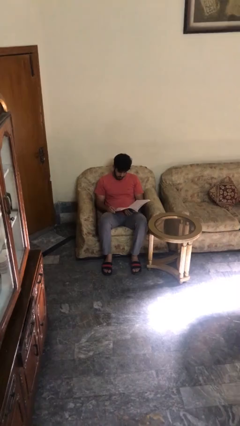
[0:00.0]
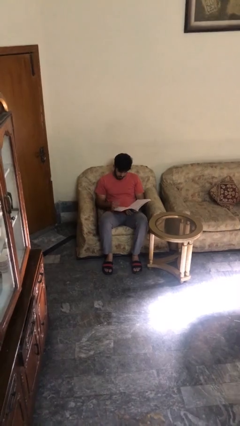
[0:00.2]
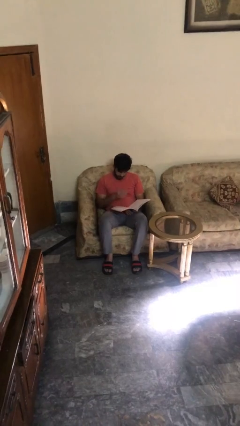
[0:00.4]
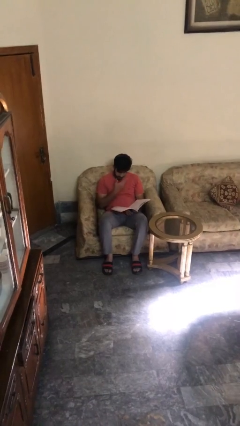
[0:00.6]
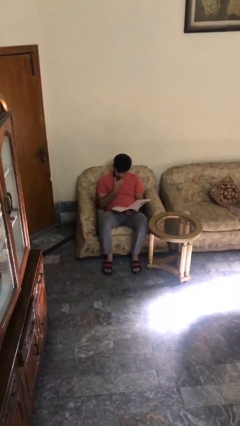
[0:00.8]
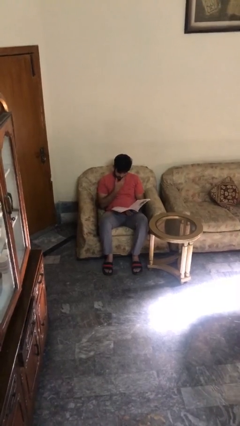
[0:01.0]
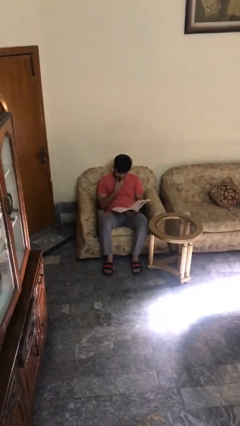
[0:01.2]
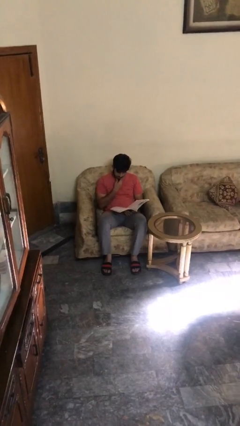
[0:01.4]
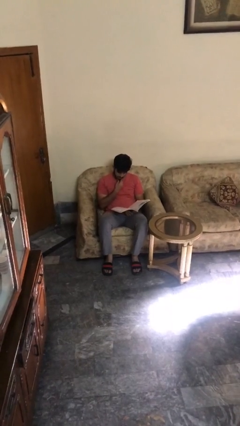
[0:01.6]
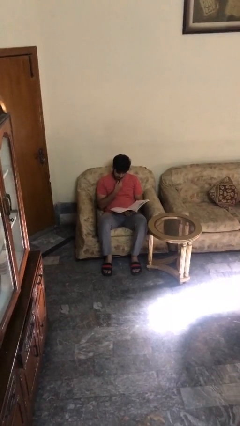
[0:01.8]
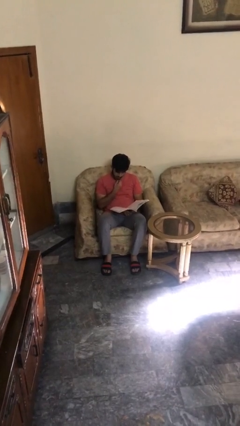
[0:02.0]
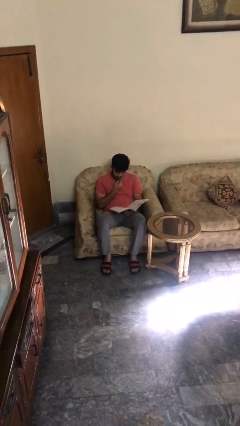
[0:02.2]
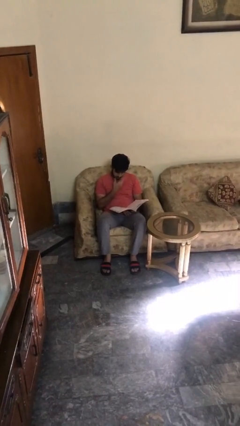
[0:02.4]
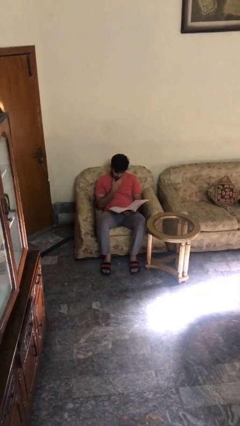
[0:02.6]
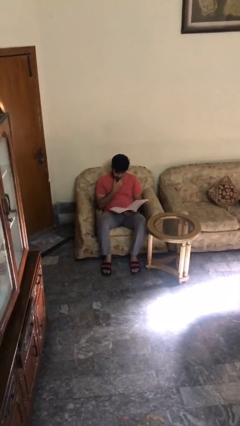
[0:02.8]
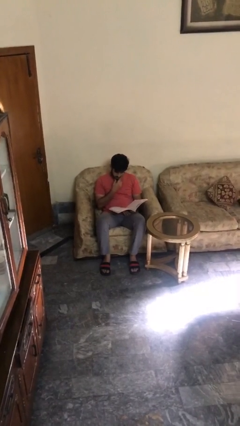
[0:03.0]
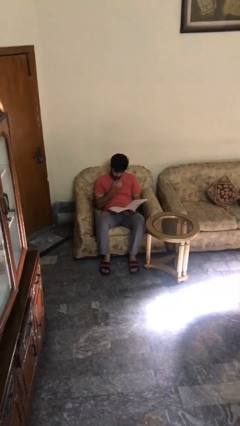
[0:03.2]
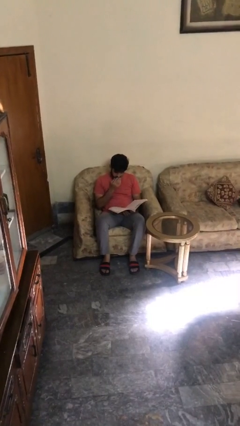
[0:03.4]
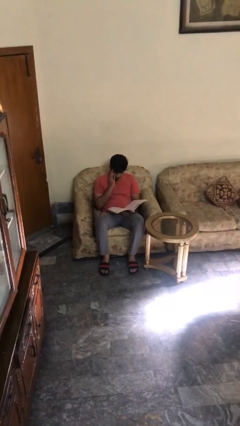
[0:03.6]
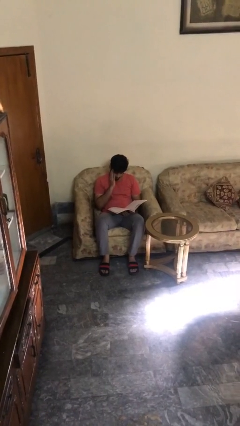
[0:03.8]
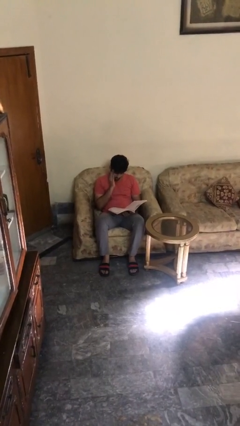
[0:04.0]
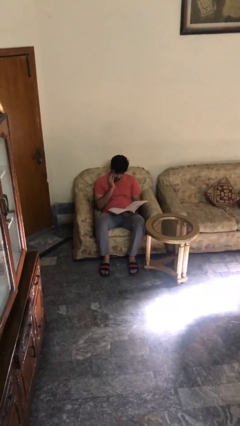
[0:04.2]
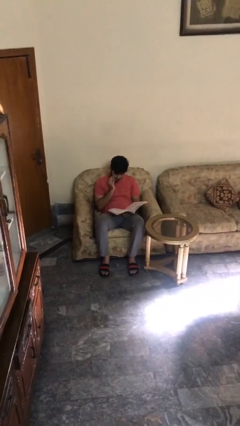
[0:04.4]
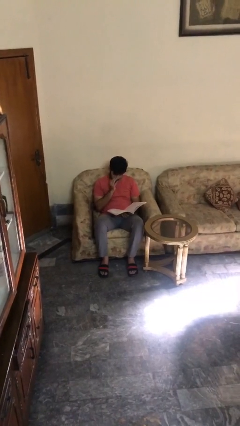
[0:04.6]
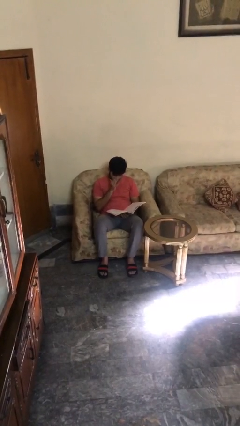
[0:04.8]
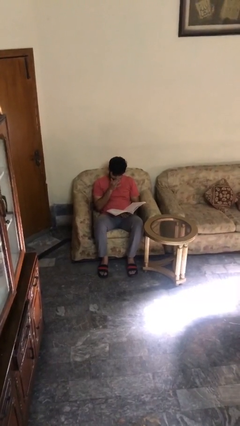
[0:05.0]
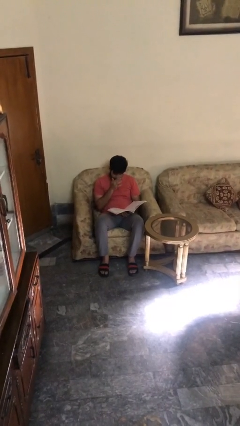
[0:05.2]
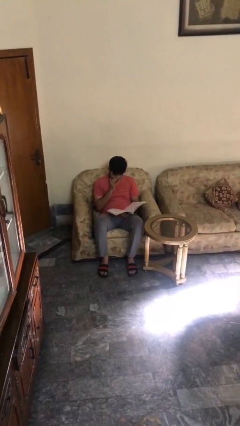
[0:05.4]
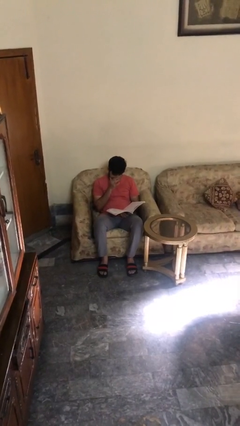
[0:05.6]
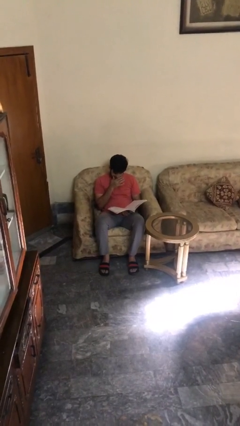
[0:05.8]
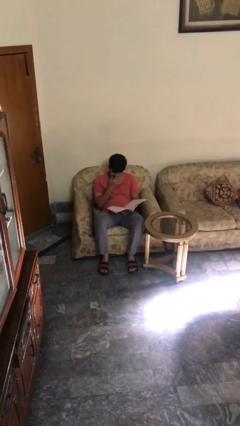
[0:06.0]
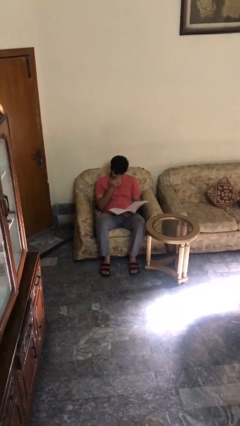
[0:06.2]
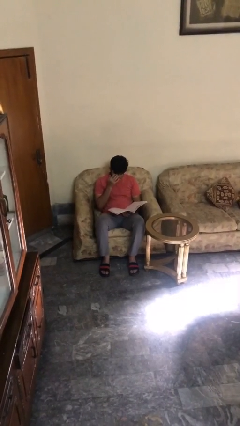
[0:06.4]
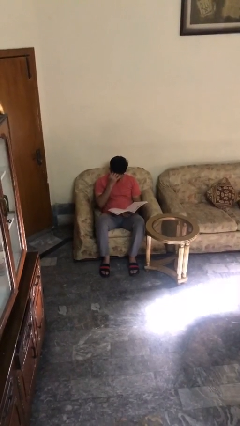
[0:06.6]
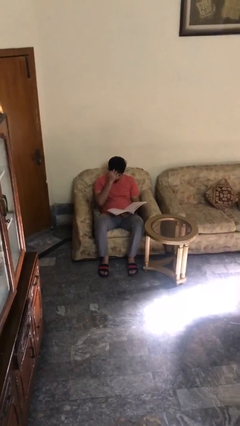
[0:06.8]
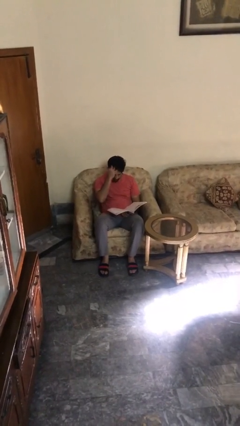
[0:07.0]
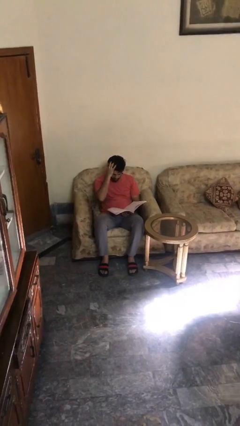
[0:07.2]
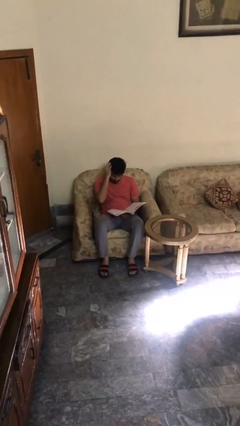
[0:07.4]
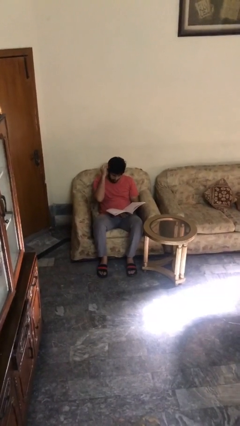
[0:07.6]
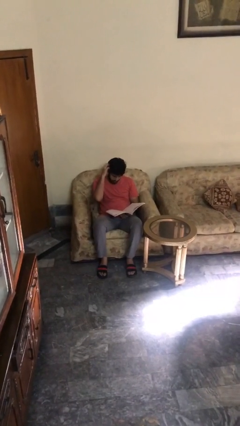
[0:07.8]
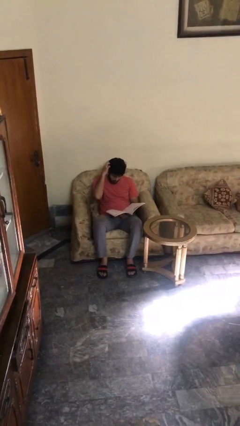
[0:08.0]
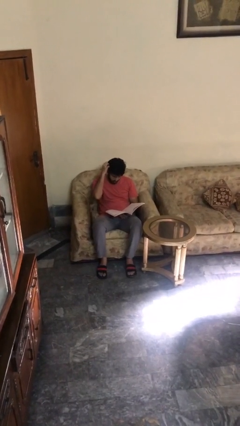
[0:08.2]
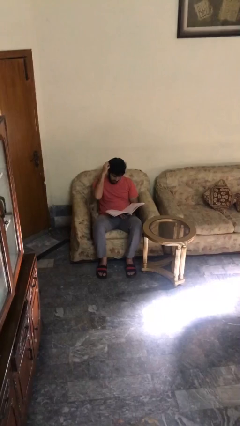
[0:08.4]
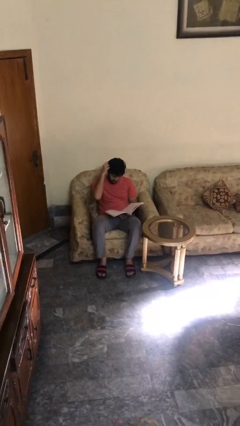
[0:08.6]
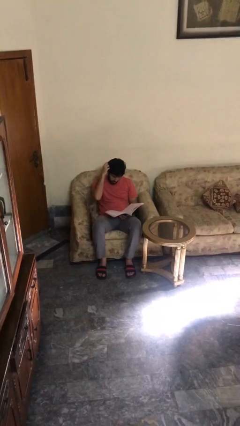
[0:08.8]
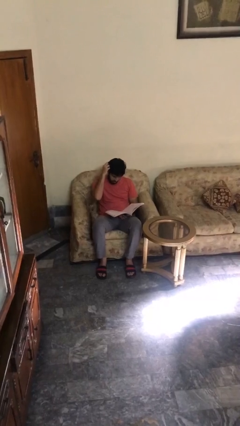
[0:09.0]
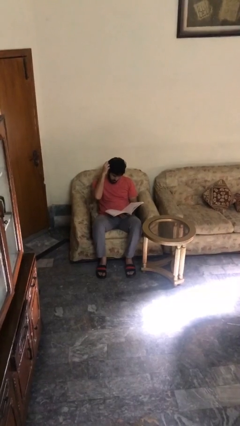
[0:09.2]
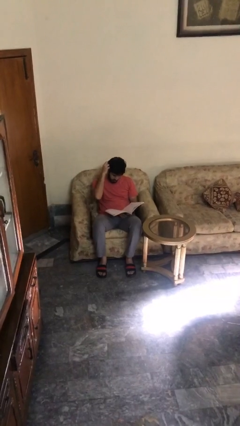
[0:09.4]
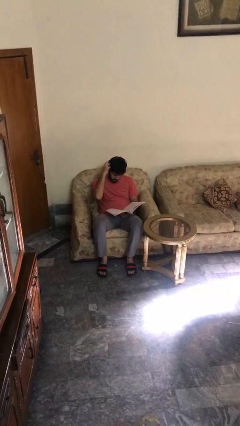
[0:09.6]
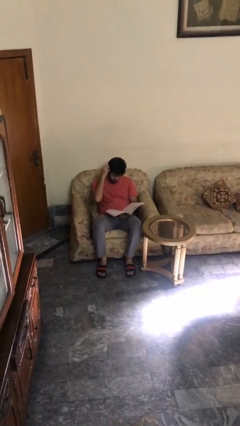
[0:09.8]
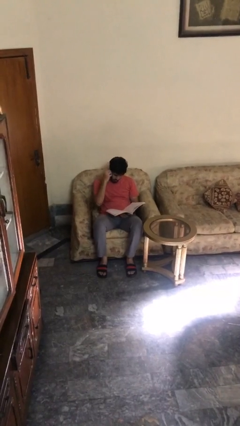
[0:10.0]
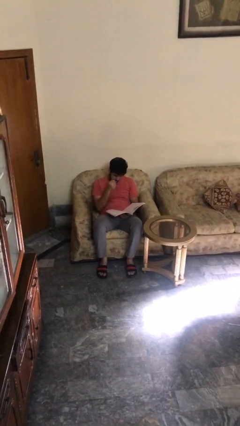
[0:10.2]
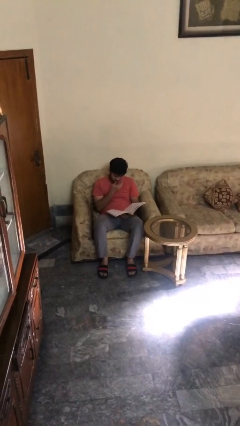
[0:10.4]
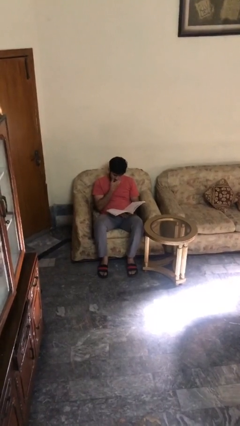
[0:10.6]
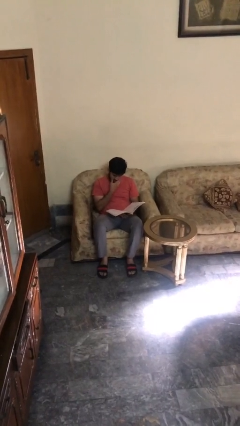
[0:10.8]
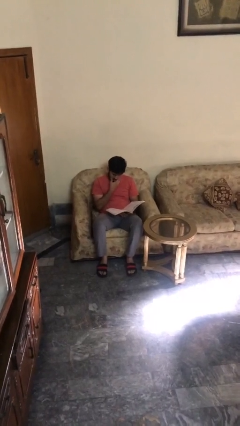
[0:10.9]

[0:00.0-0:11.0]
person reads document

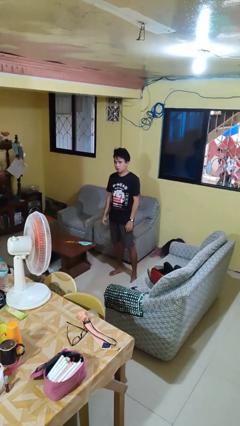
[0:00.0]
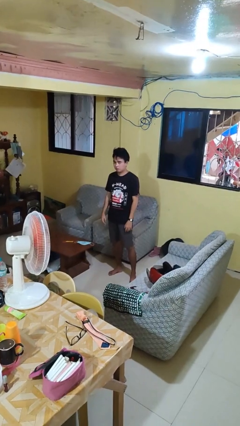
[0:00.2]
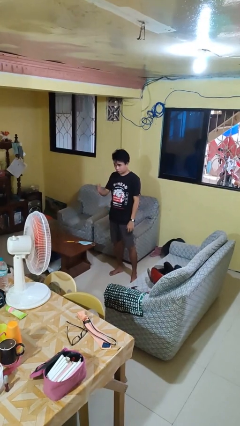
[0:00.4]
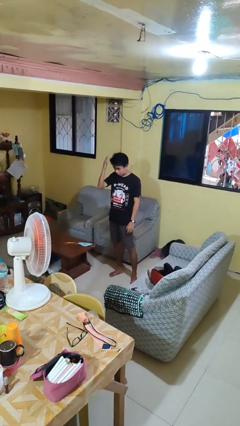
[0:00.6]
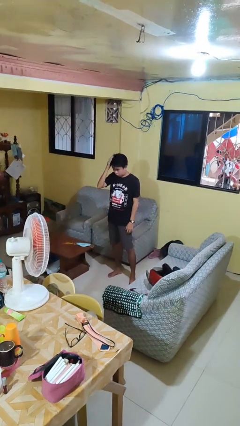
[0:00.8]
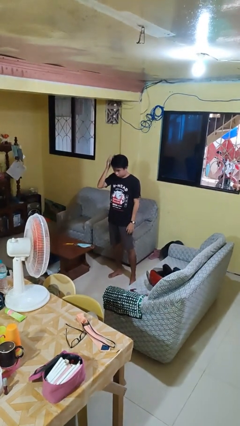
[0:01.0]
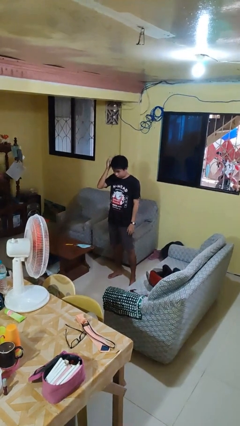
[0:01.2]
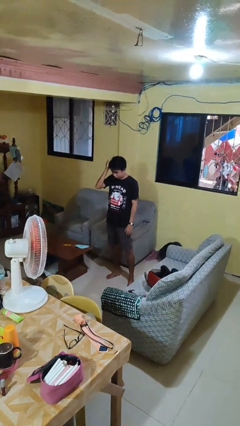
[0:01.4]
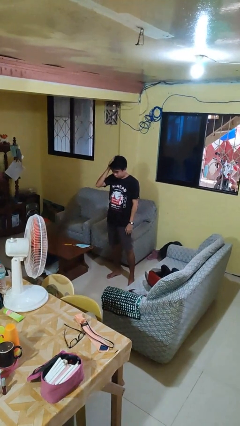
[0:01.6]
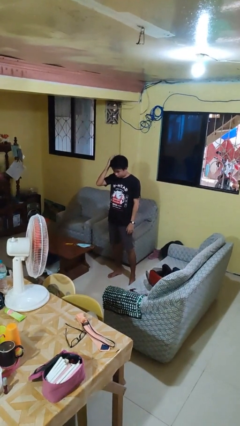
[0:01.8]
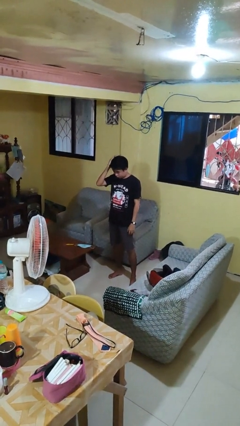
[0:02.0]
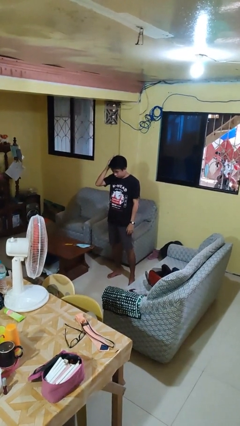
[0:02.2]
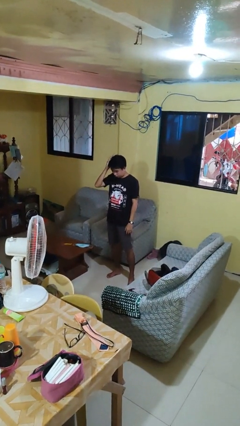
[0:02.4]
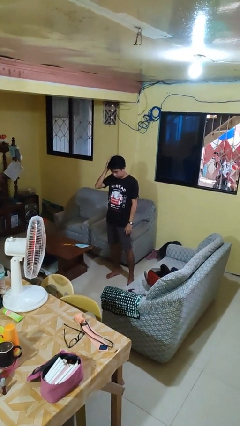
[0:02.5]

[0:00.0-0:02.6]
person pats head

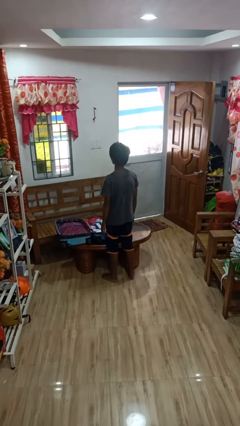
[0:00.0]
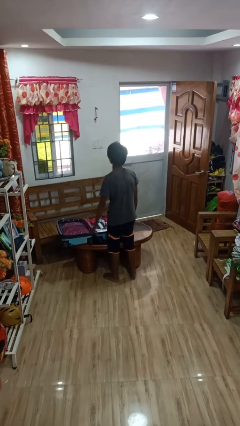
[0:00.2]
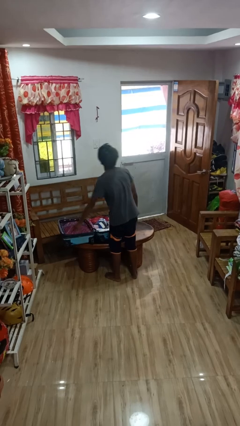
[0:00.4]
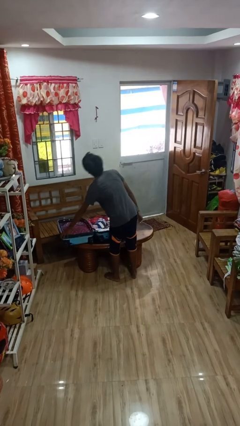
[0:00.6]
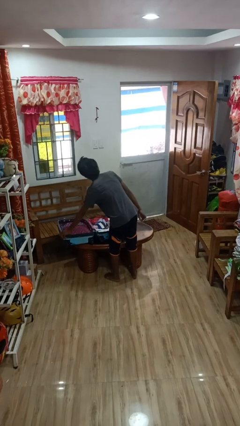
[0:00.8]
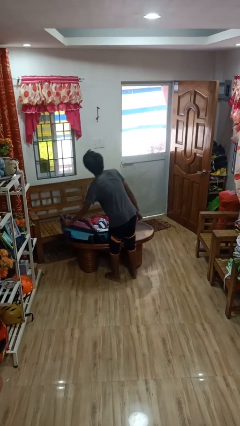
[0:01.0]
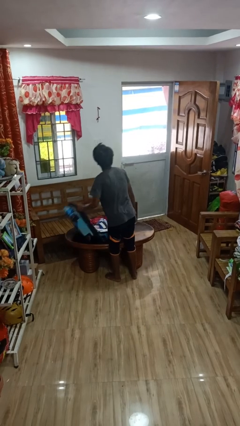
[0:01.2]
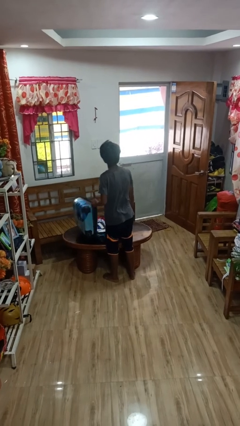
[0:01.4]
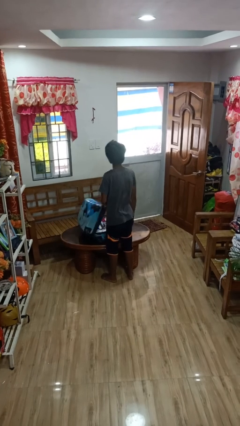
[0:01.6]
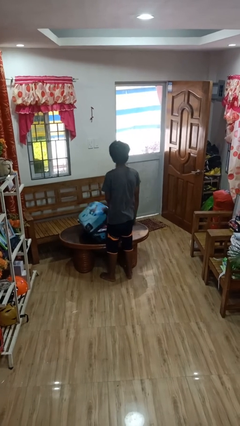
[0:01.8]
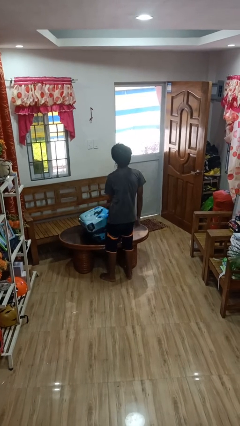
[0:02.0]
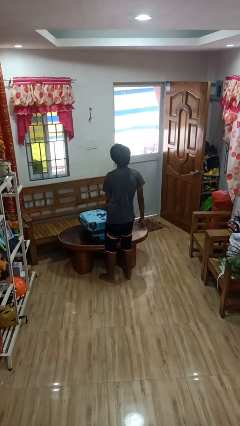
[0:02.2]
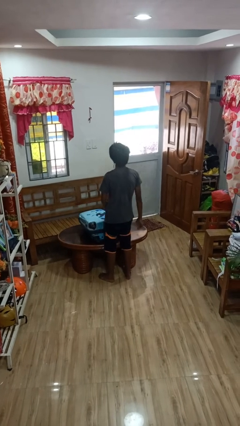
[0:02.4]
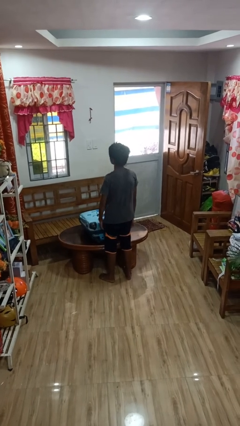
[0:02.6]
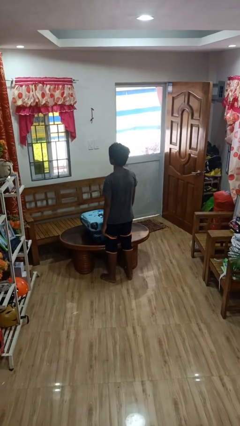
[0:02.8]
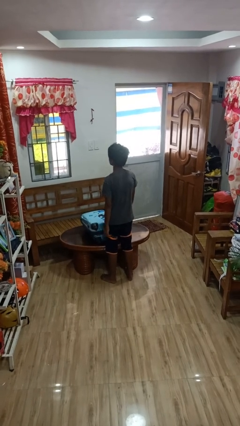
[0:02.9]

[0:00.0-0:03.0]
person closes suitcase

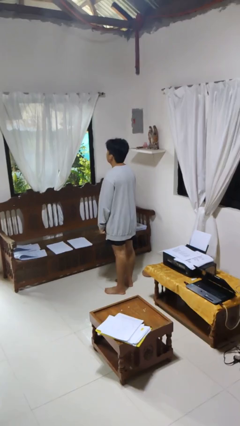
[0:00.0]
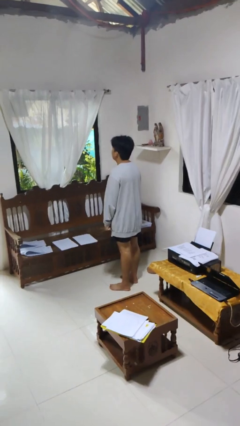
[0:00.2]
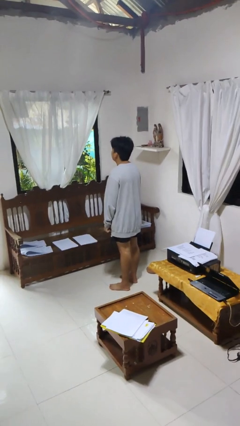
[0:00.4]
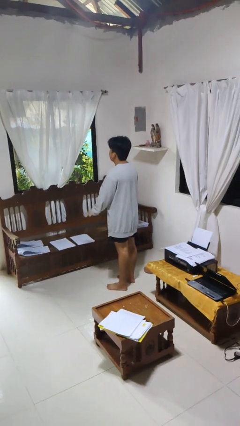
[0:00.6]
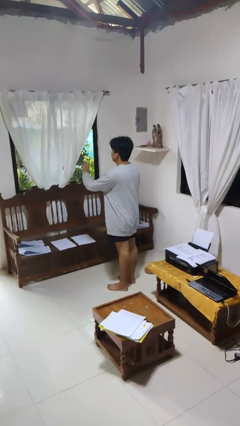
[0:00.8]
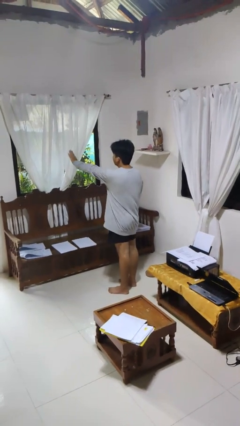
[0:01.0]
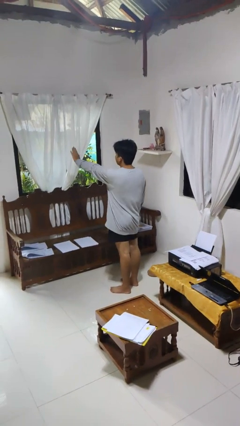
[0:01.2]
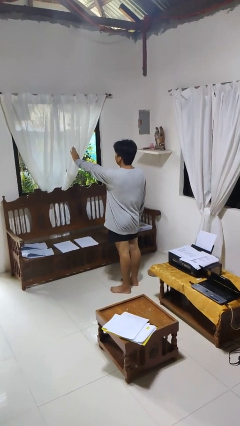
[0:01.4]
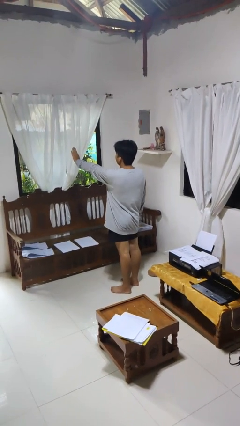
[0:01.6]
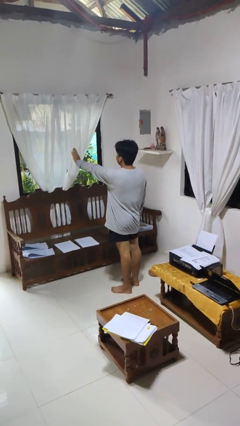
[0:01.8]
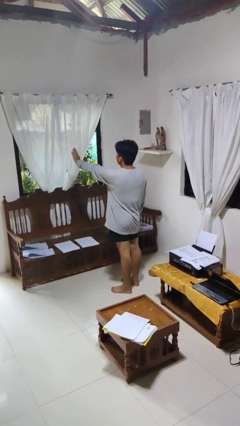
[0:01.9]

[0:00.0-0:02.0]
person gestures stop
